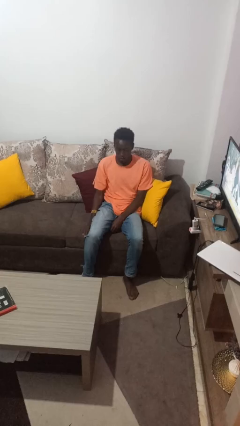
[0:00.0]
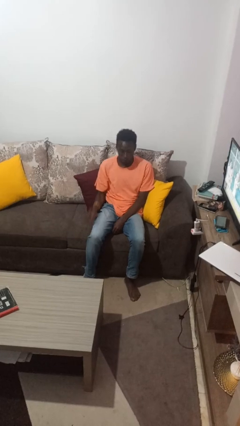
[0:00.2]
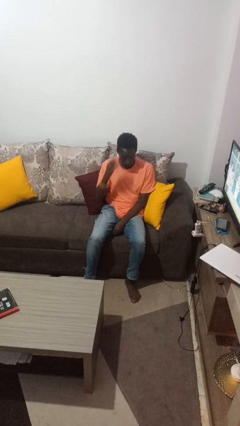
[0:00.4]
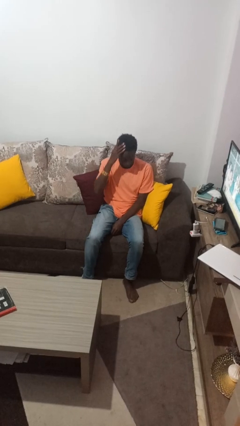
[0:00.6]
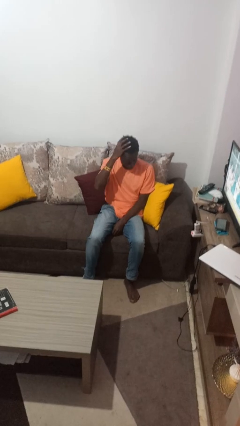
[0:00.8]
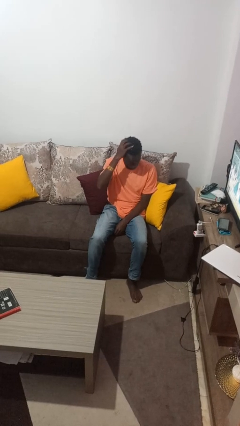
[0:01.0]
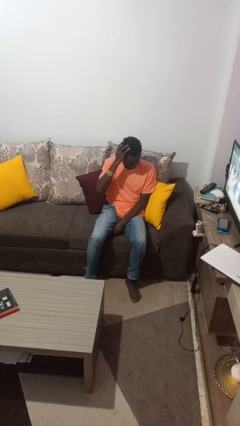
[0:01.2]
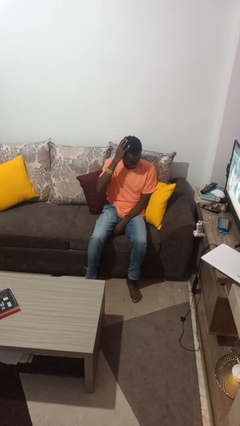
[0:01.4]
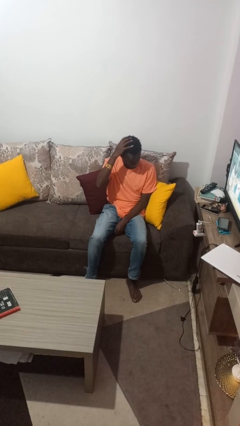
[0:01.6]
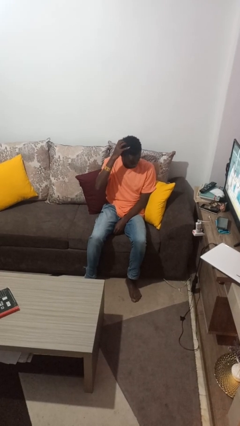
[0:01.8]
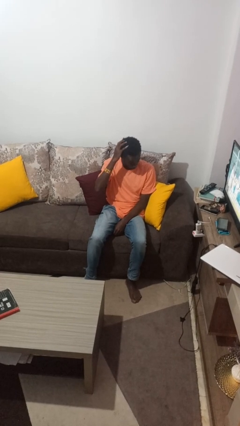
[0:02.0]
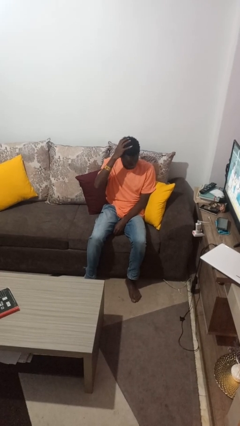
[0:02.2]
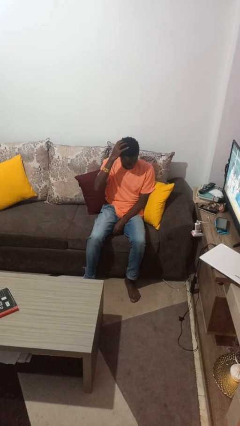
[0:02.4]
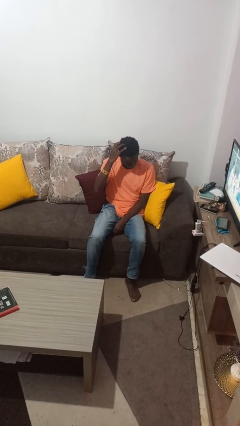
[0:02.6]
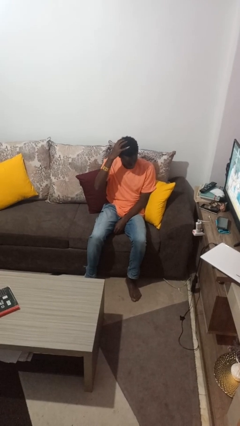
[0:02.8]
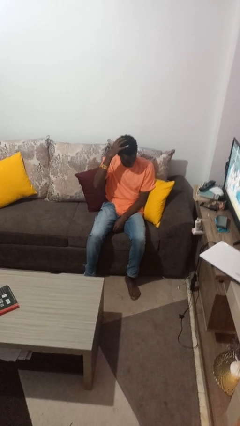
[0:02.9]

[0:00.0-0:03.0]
person strokes hair

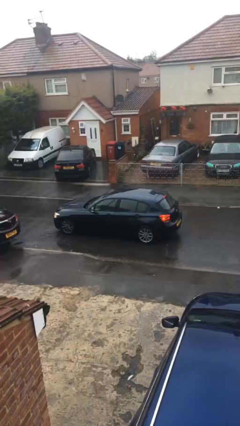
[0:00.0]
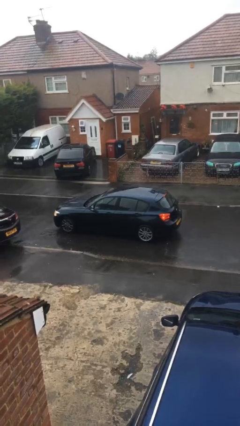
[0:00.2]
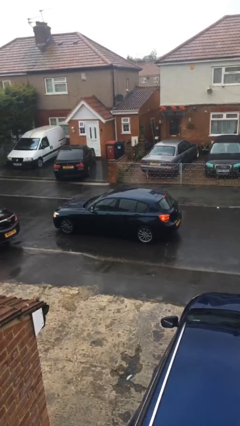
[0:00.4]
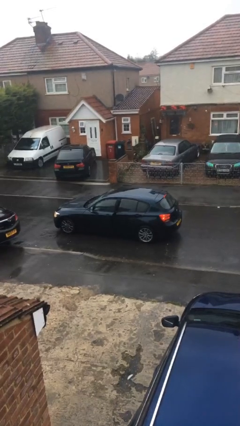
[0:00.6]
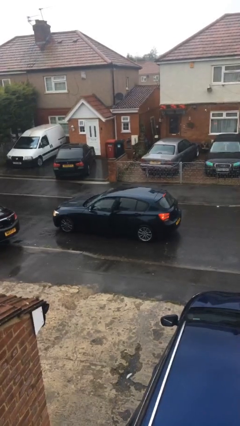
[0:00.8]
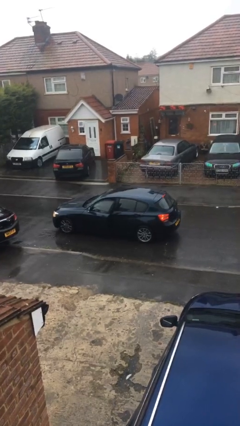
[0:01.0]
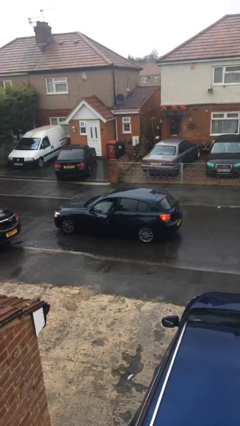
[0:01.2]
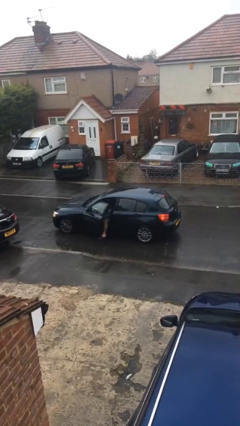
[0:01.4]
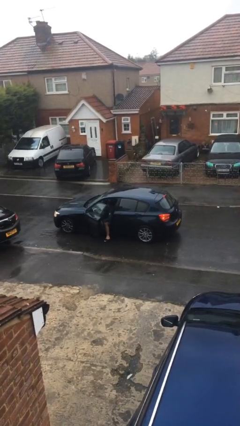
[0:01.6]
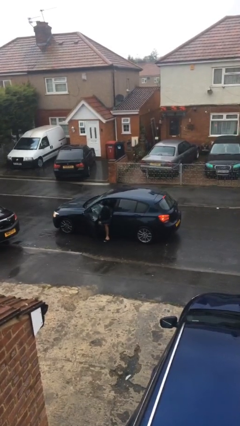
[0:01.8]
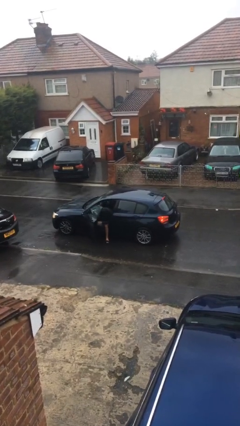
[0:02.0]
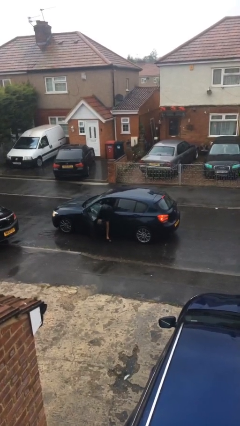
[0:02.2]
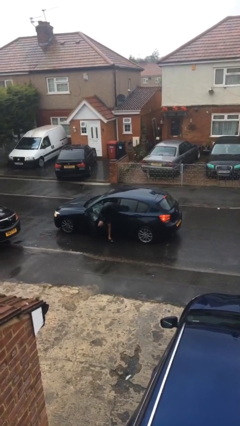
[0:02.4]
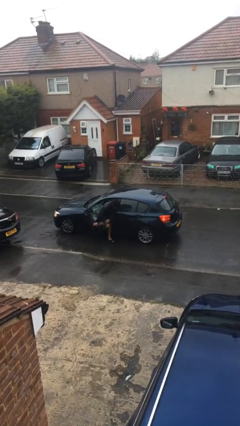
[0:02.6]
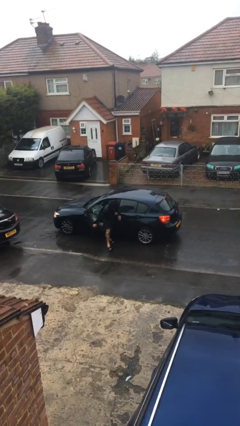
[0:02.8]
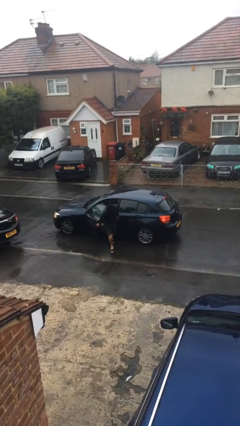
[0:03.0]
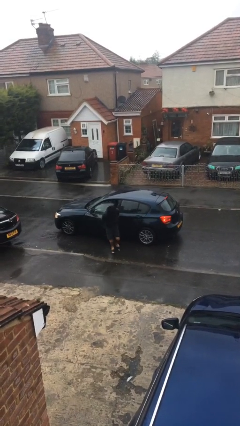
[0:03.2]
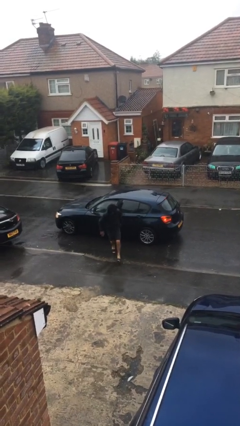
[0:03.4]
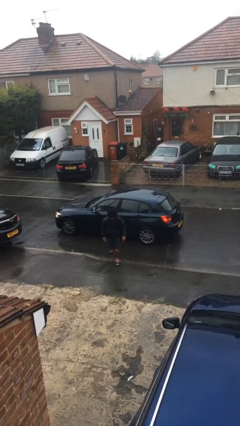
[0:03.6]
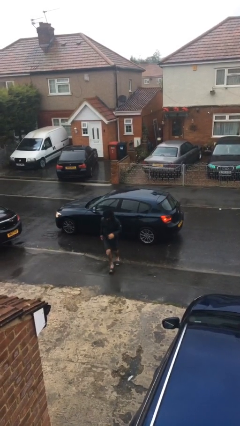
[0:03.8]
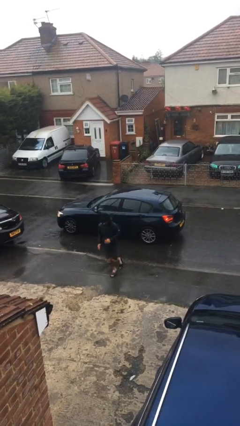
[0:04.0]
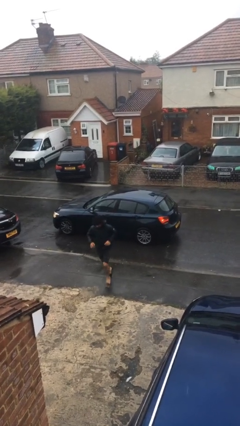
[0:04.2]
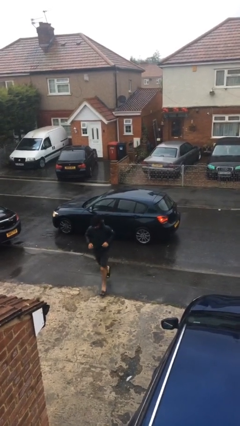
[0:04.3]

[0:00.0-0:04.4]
car drops off person

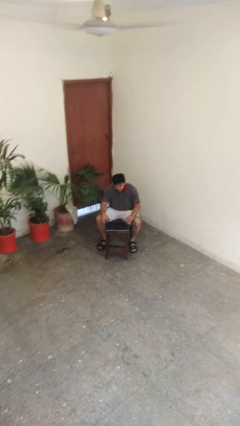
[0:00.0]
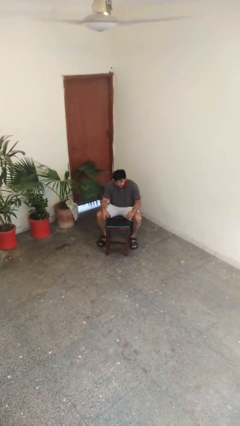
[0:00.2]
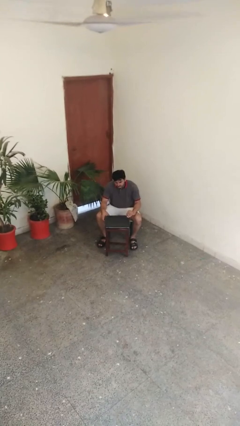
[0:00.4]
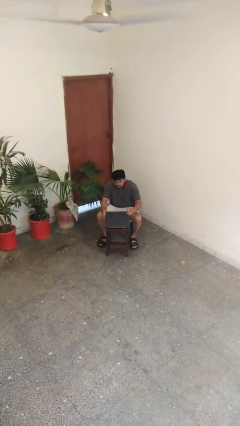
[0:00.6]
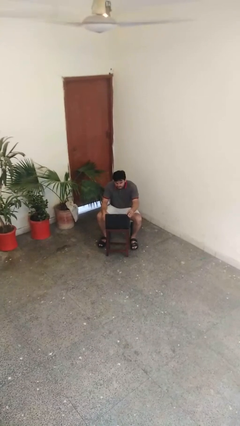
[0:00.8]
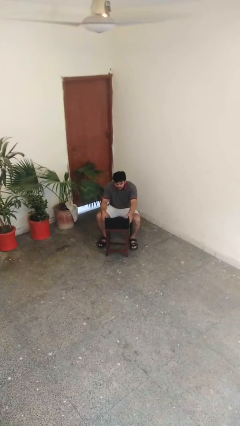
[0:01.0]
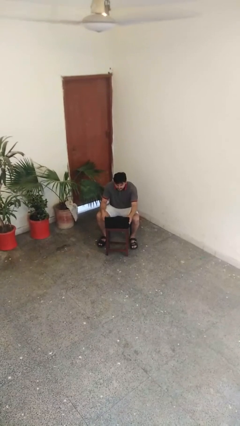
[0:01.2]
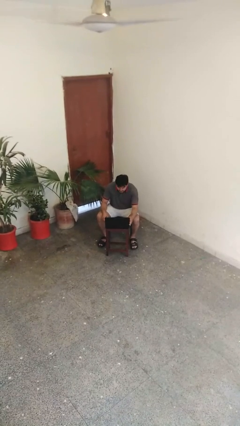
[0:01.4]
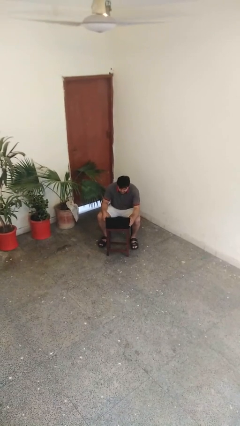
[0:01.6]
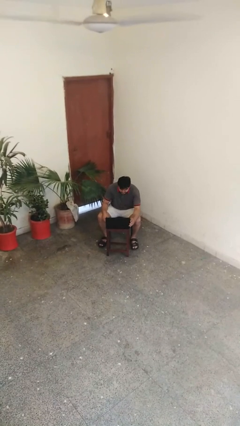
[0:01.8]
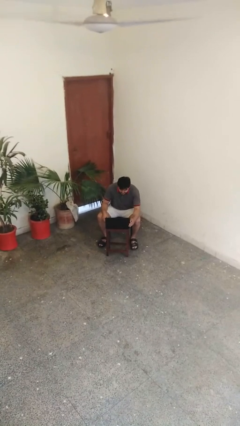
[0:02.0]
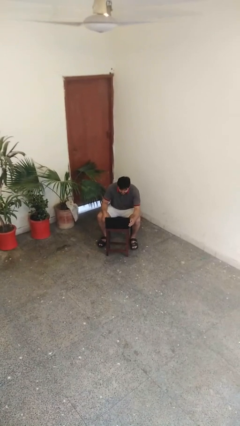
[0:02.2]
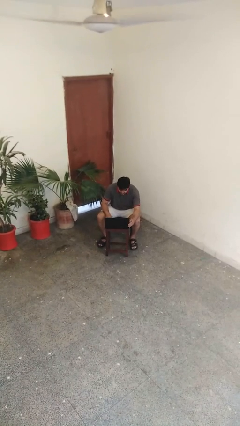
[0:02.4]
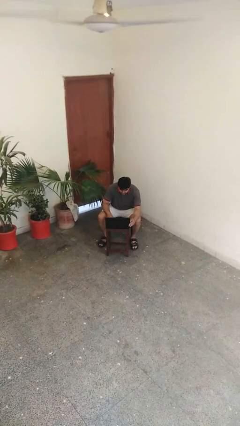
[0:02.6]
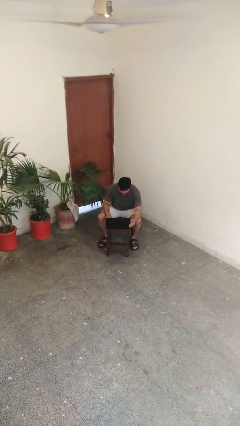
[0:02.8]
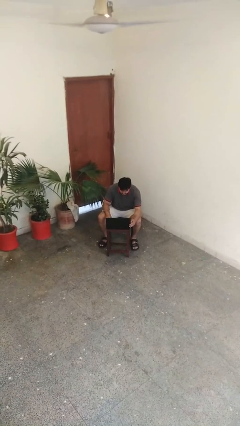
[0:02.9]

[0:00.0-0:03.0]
person opens laptop

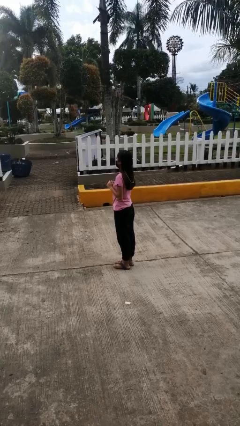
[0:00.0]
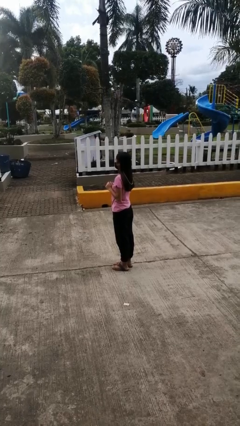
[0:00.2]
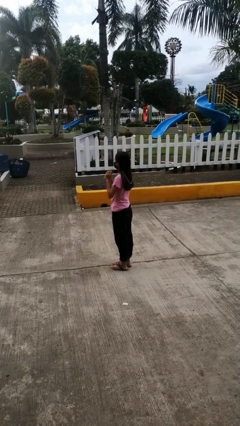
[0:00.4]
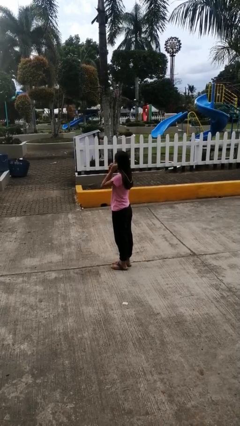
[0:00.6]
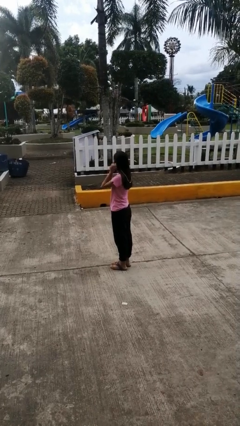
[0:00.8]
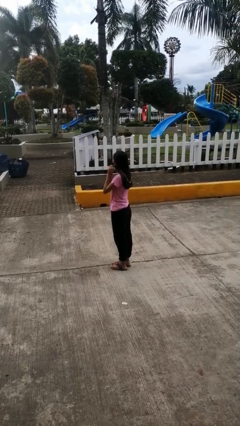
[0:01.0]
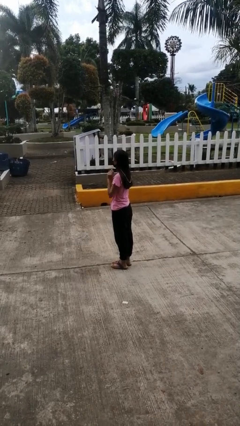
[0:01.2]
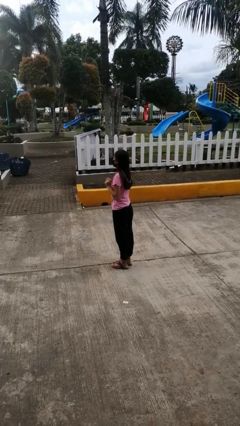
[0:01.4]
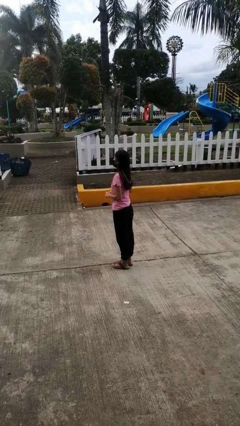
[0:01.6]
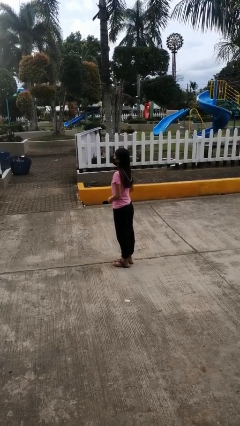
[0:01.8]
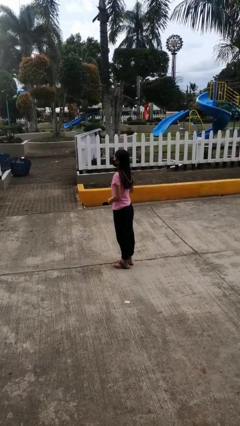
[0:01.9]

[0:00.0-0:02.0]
person takes off earrings

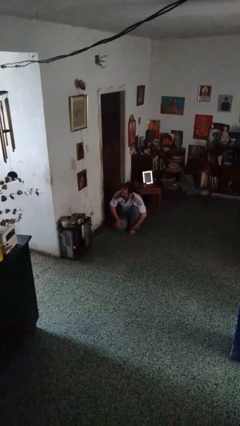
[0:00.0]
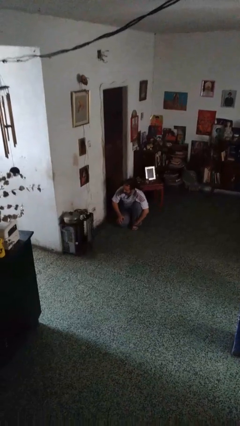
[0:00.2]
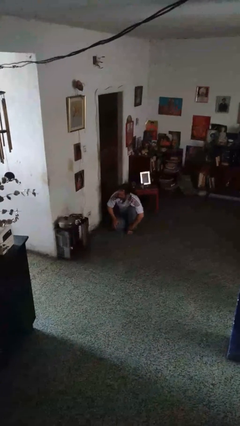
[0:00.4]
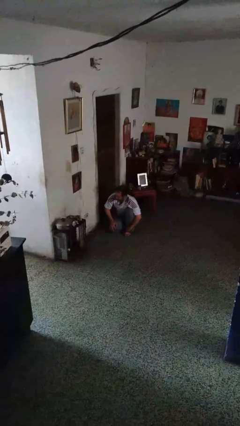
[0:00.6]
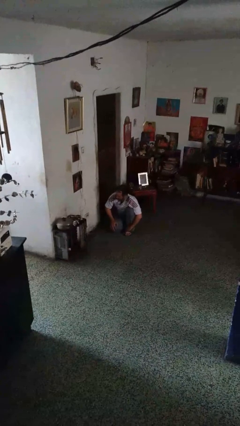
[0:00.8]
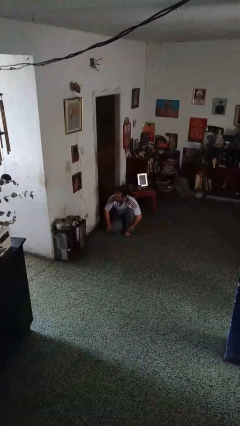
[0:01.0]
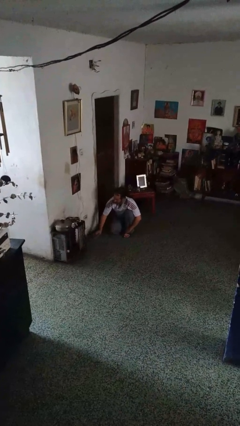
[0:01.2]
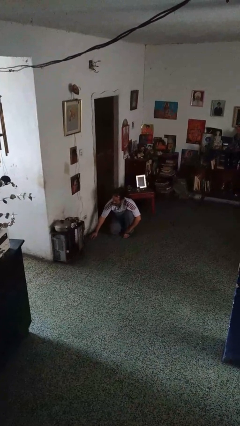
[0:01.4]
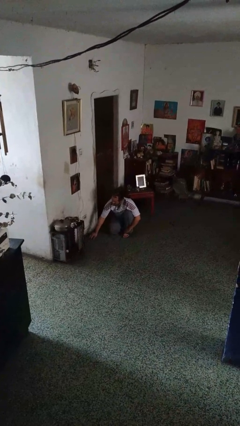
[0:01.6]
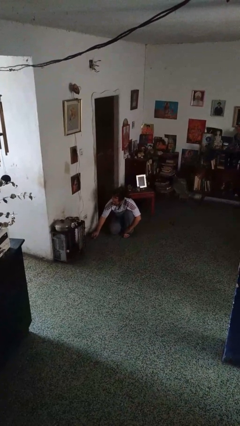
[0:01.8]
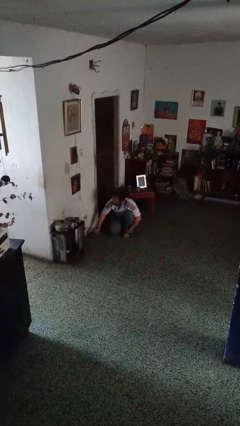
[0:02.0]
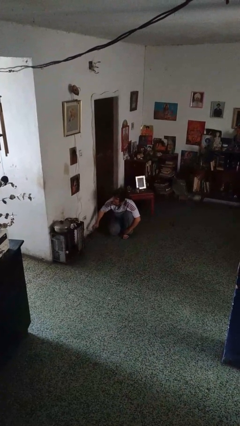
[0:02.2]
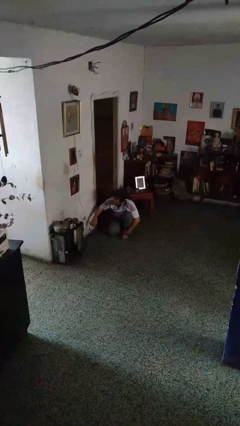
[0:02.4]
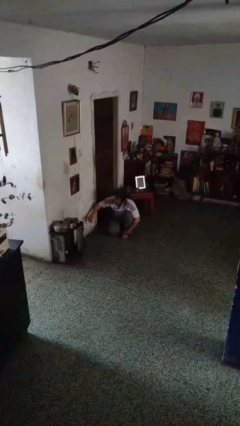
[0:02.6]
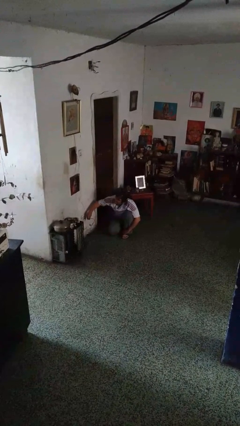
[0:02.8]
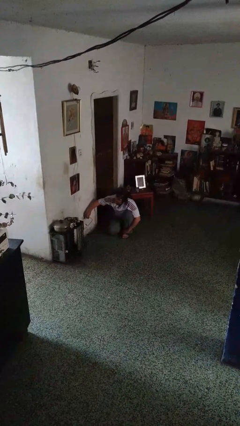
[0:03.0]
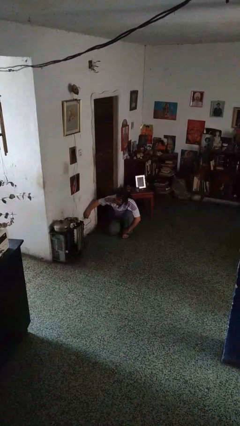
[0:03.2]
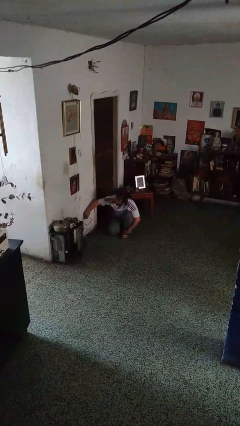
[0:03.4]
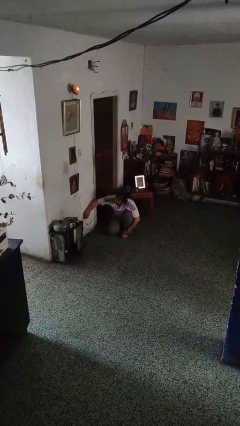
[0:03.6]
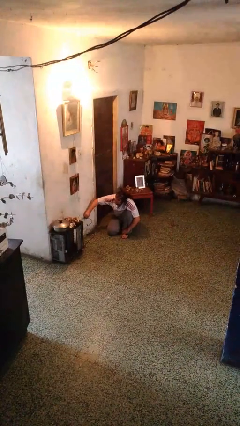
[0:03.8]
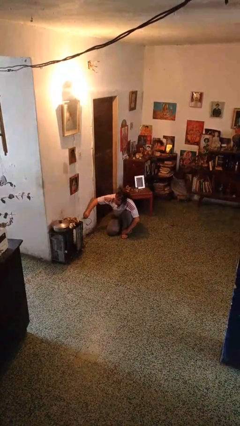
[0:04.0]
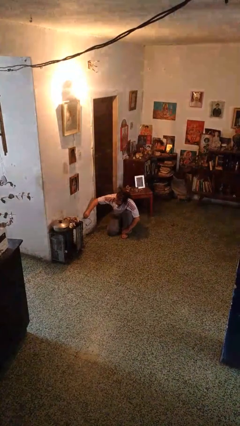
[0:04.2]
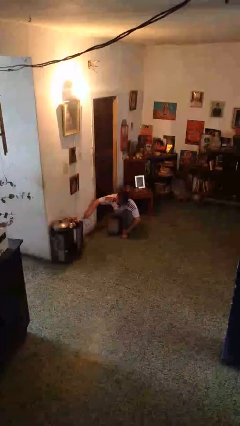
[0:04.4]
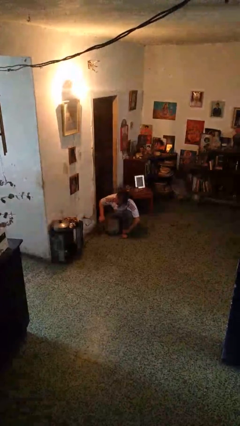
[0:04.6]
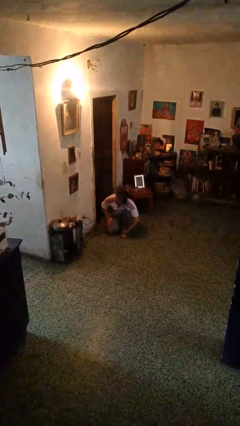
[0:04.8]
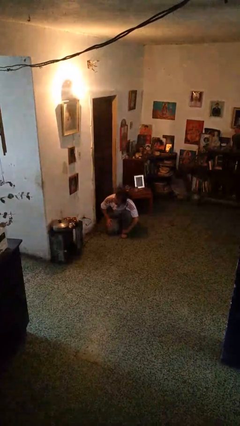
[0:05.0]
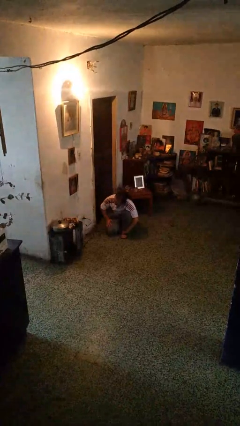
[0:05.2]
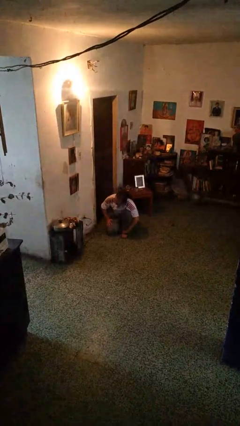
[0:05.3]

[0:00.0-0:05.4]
person plugs into electrical socket
